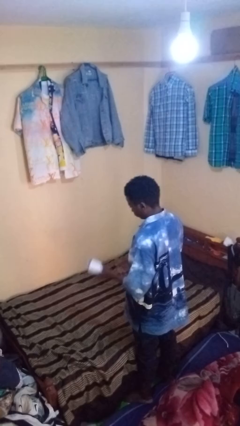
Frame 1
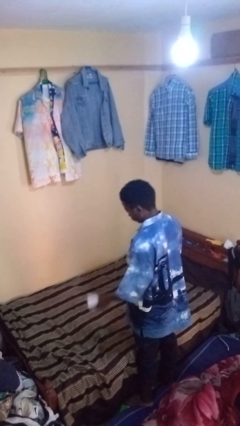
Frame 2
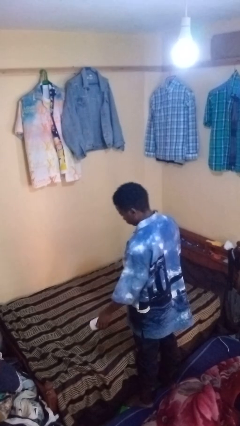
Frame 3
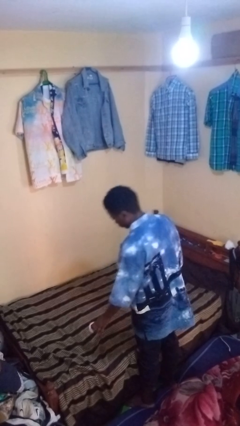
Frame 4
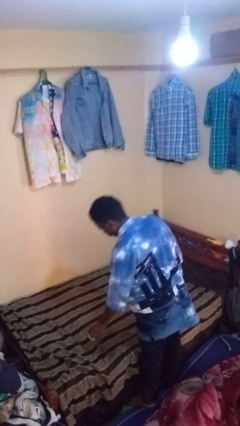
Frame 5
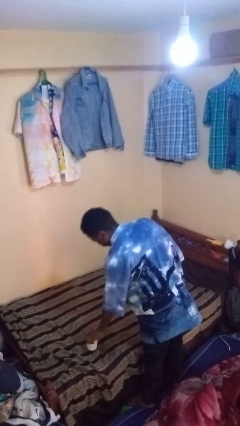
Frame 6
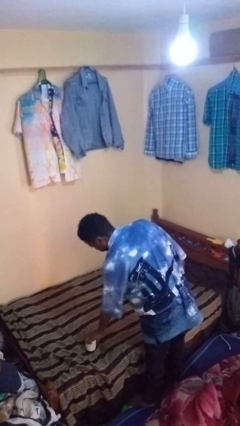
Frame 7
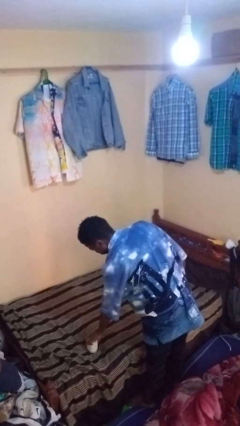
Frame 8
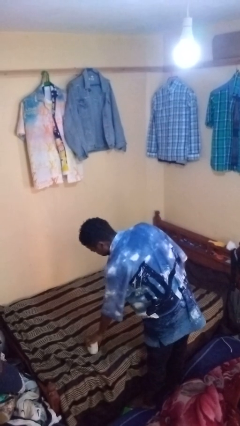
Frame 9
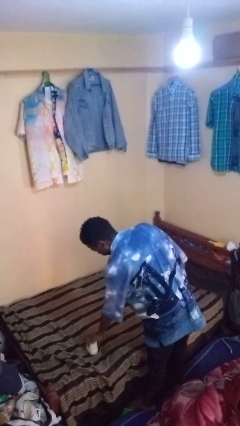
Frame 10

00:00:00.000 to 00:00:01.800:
person puts down object on bed

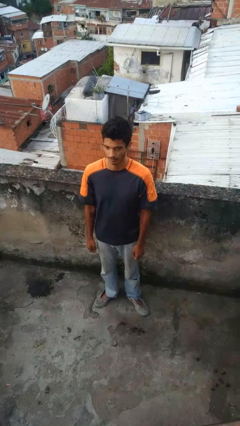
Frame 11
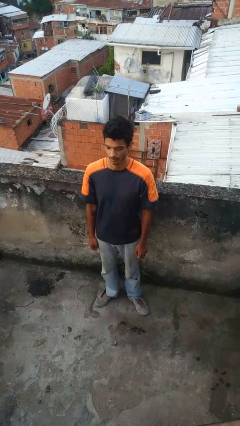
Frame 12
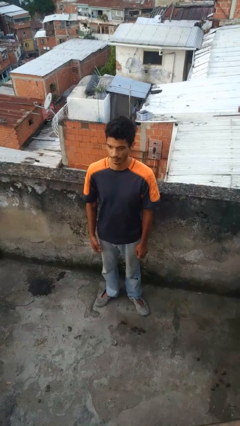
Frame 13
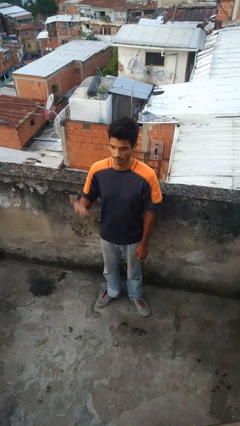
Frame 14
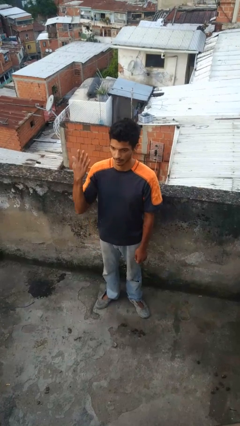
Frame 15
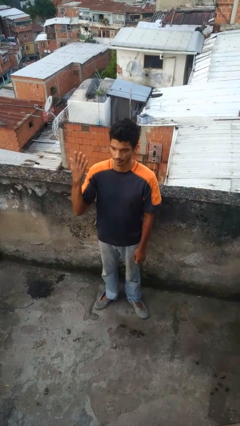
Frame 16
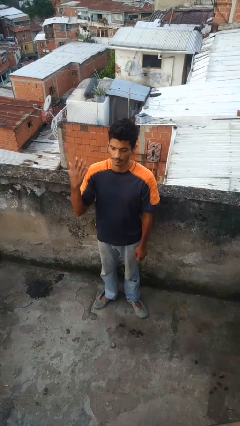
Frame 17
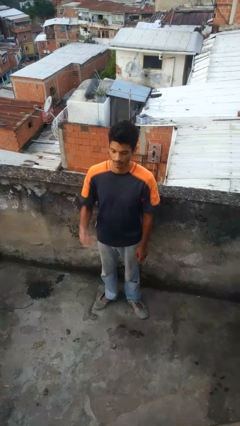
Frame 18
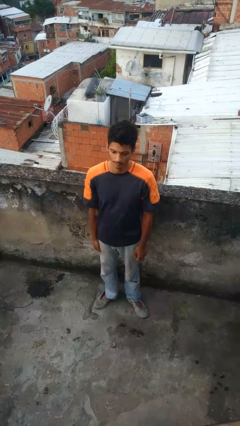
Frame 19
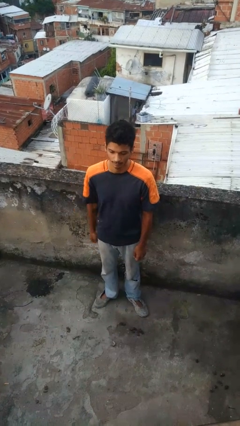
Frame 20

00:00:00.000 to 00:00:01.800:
person gestures number five

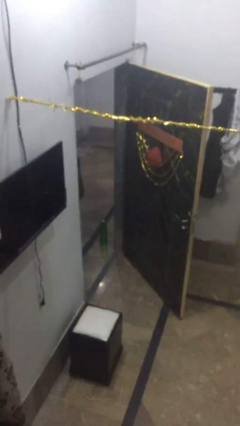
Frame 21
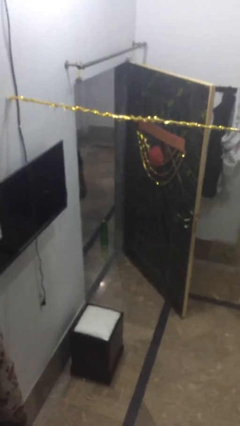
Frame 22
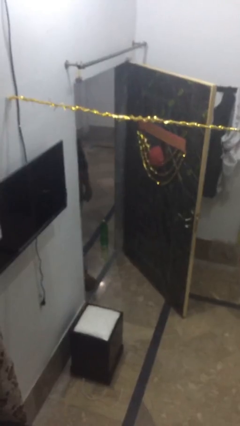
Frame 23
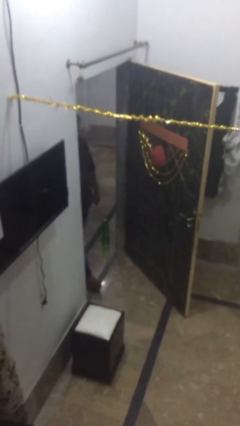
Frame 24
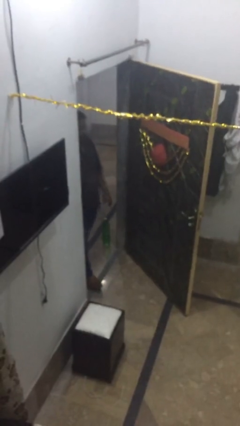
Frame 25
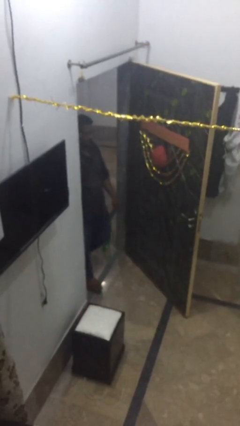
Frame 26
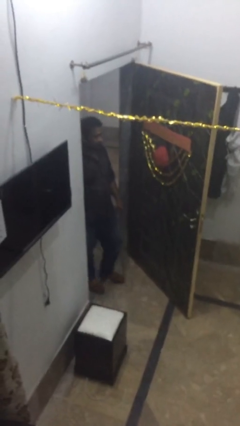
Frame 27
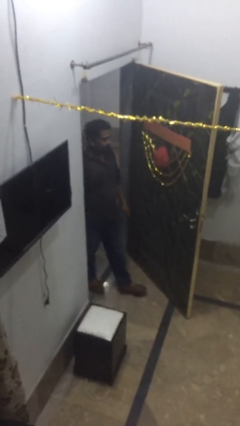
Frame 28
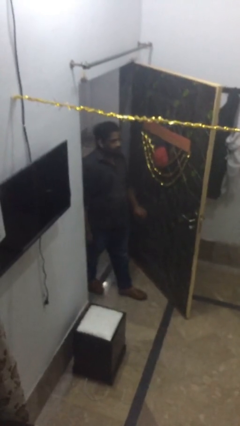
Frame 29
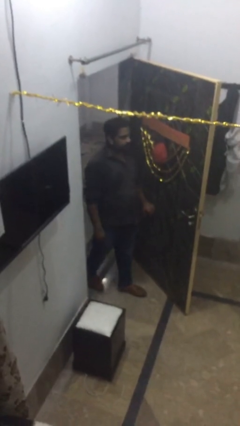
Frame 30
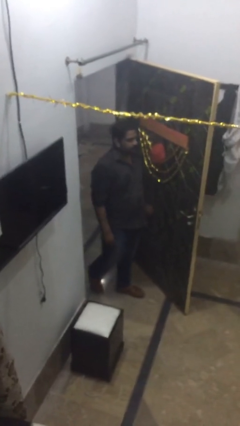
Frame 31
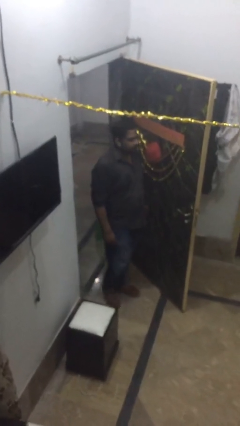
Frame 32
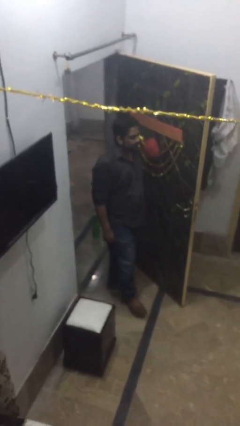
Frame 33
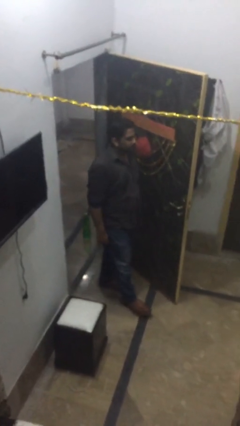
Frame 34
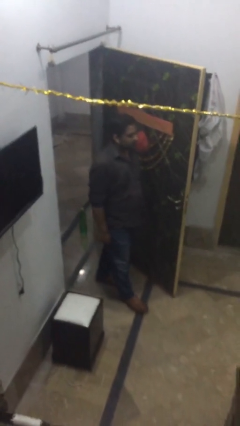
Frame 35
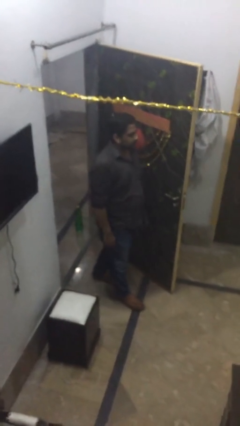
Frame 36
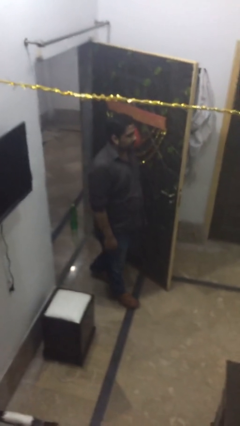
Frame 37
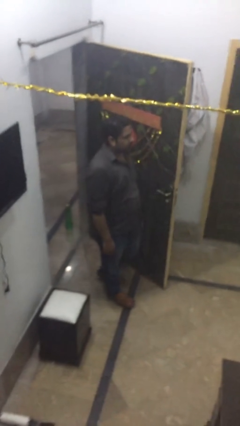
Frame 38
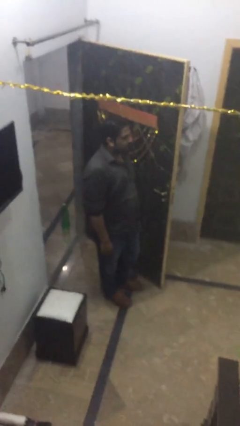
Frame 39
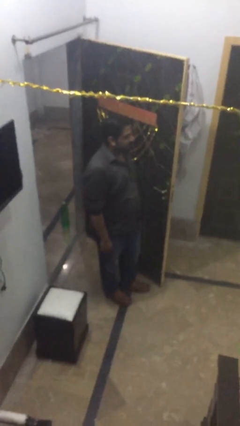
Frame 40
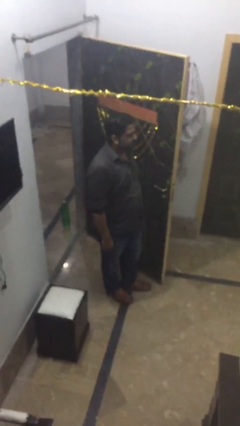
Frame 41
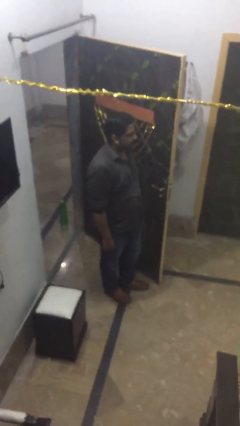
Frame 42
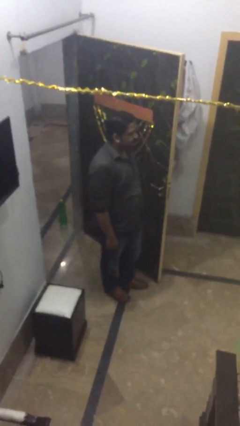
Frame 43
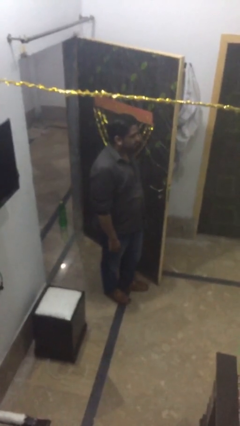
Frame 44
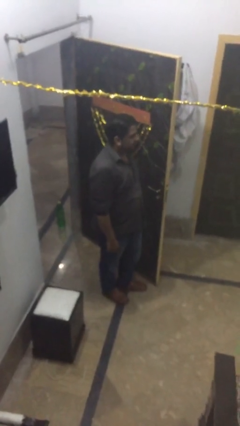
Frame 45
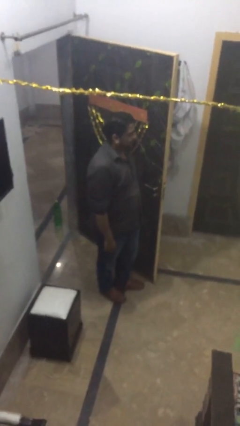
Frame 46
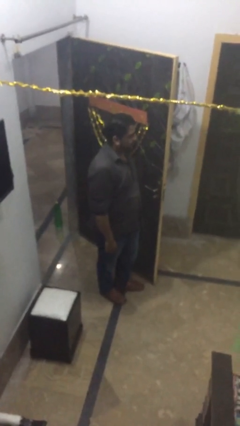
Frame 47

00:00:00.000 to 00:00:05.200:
person enters scene through structure

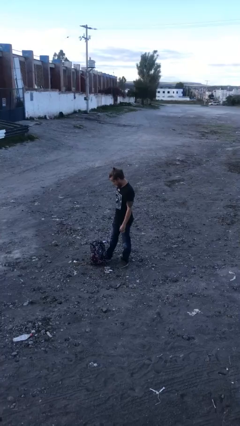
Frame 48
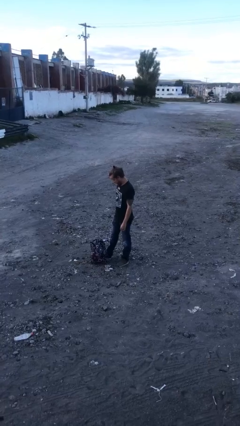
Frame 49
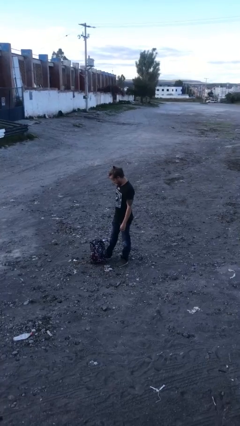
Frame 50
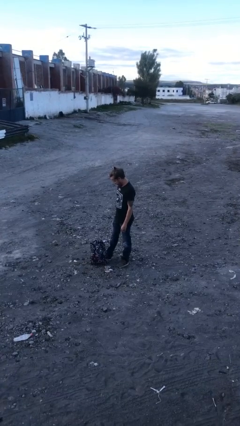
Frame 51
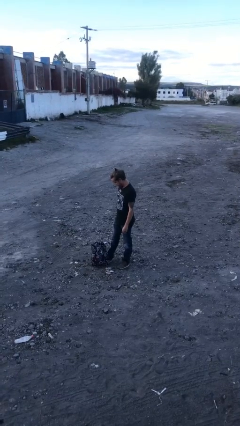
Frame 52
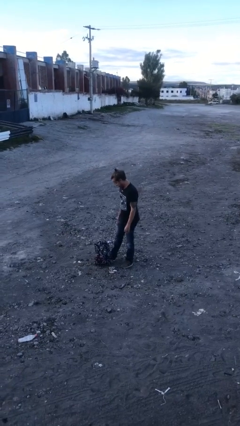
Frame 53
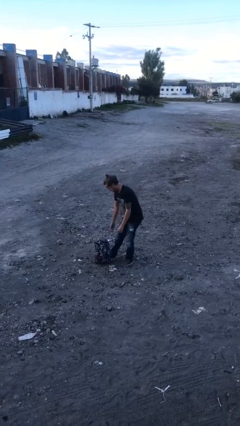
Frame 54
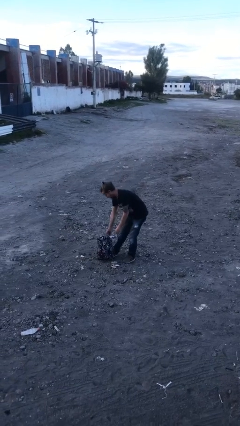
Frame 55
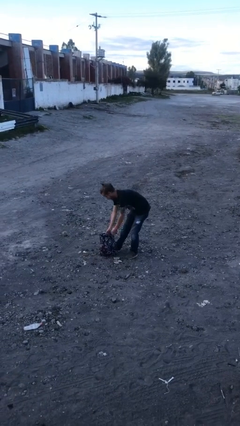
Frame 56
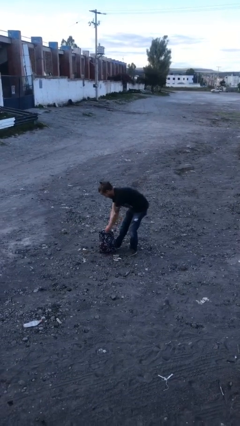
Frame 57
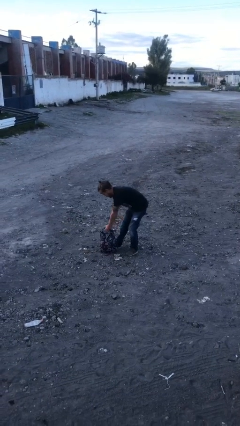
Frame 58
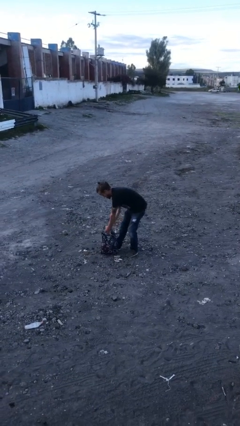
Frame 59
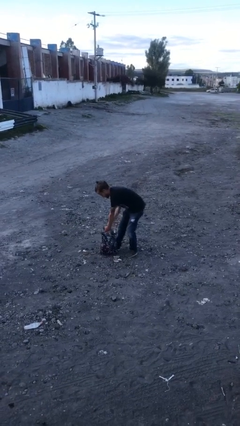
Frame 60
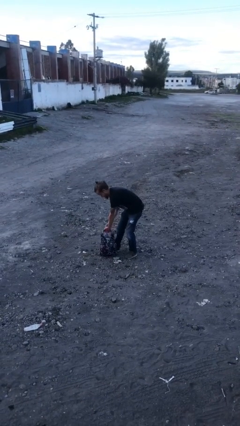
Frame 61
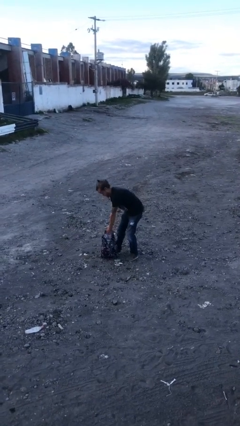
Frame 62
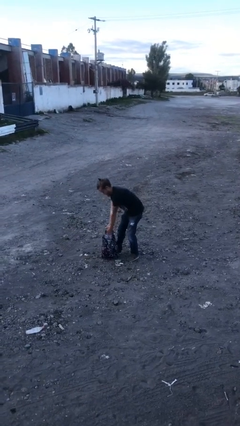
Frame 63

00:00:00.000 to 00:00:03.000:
person picks up object from floor

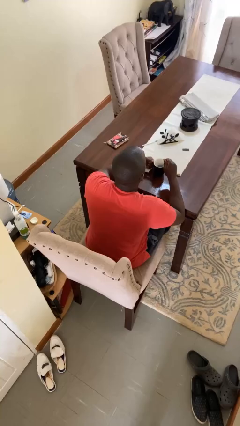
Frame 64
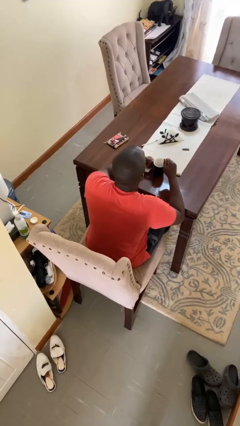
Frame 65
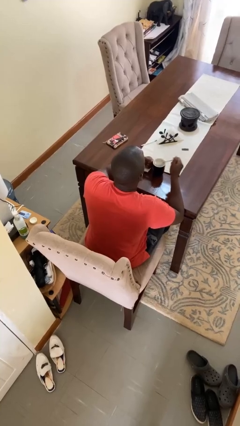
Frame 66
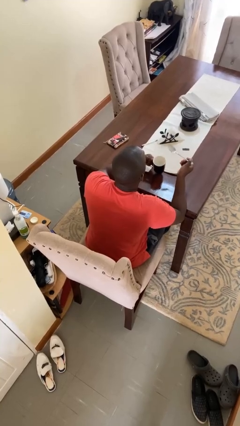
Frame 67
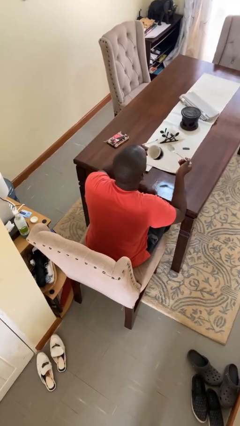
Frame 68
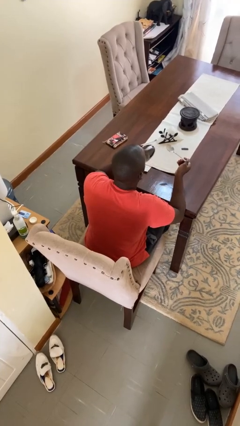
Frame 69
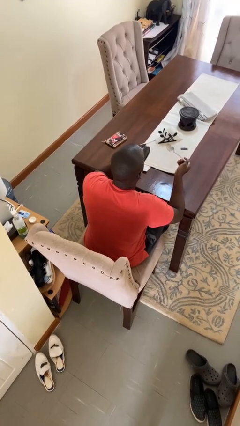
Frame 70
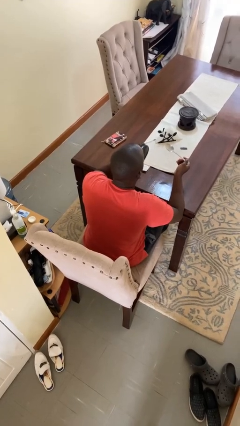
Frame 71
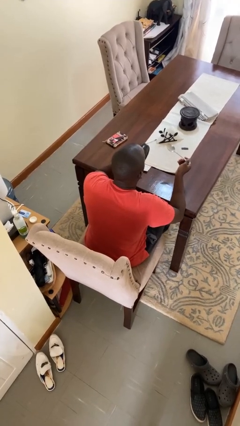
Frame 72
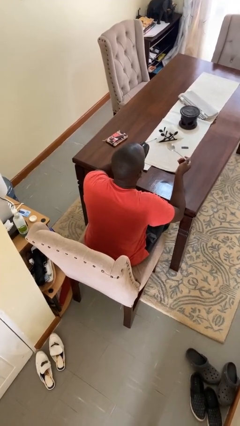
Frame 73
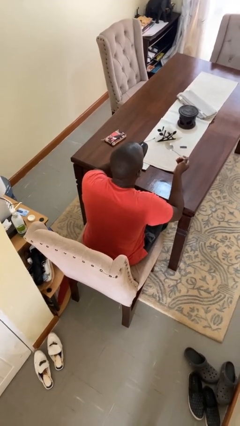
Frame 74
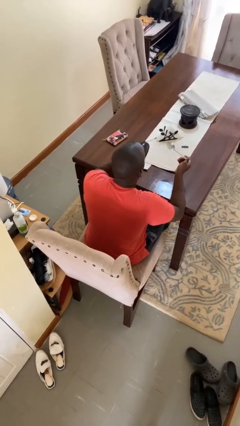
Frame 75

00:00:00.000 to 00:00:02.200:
person drinks from mug

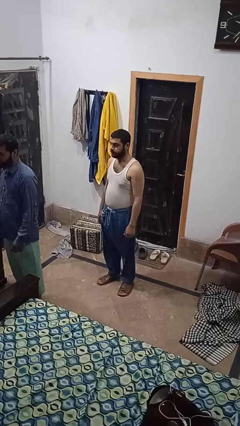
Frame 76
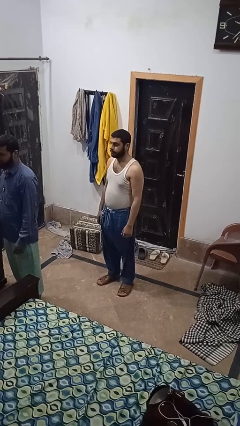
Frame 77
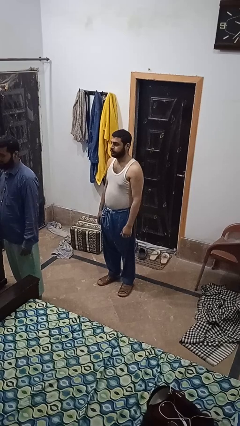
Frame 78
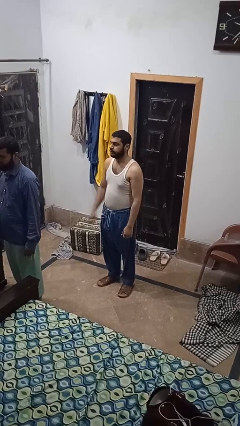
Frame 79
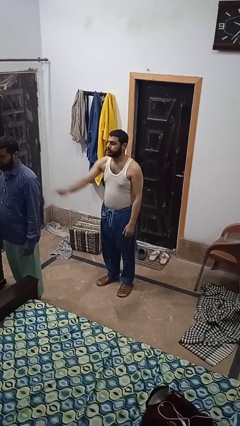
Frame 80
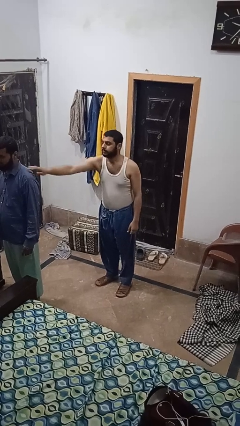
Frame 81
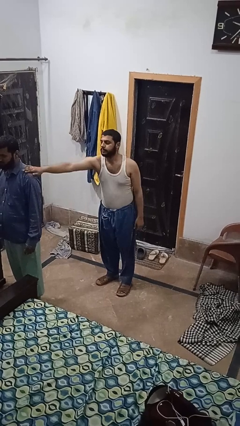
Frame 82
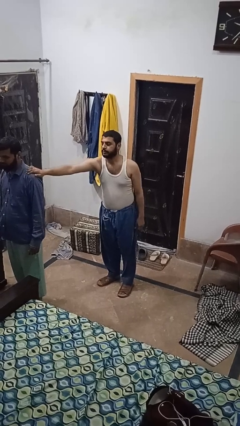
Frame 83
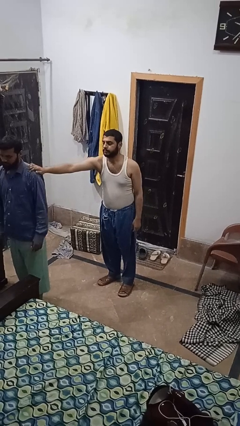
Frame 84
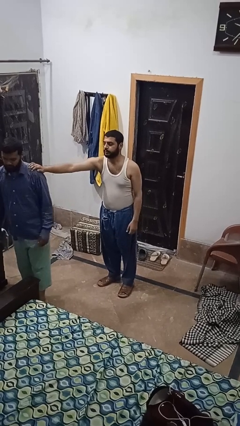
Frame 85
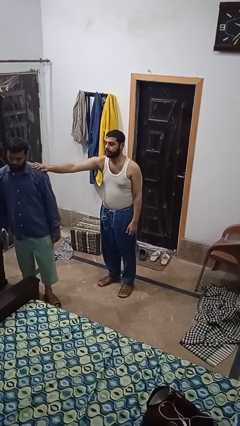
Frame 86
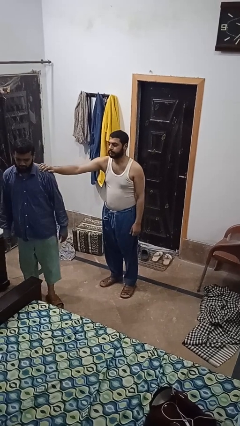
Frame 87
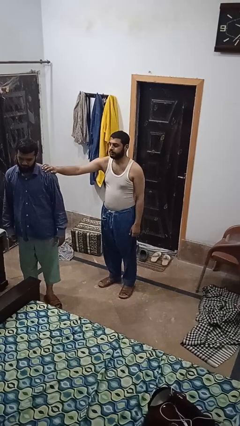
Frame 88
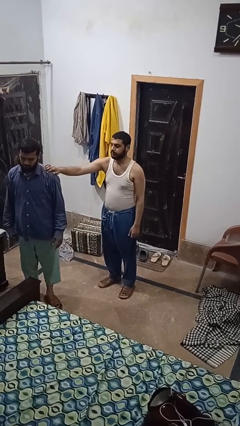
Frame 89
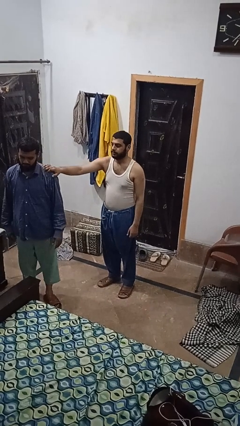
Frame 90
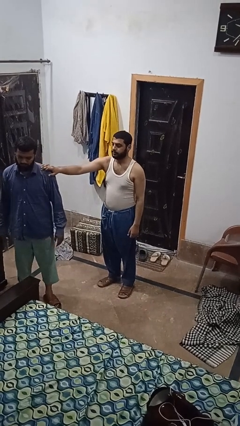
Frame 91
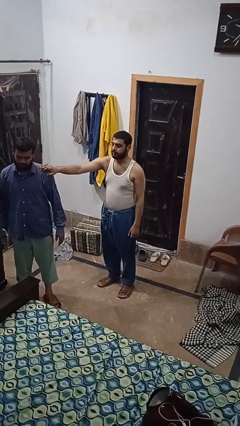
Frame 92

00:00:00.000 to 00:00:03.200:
person grabs person by shoulder

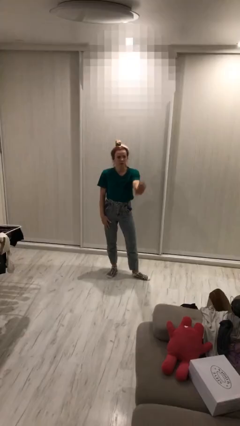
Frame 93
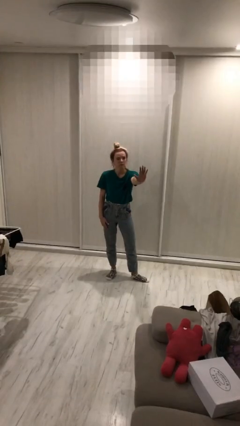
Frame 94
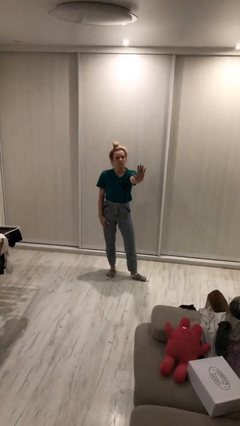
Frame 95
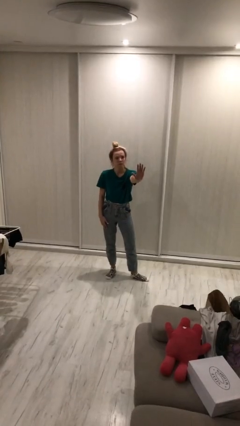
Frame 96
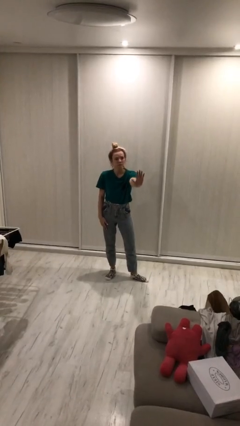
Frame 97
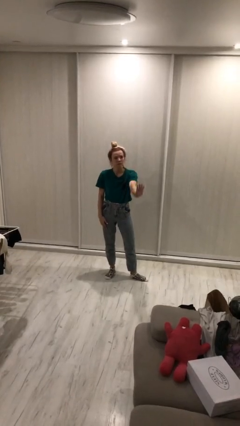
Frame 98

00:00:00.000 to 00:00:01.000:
person gestures stop
